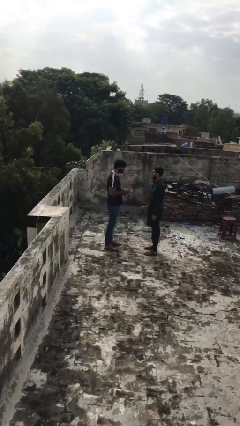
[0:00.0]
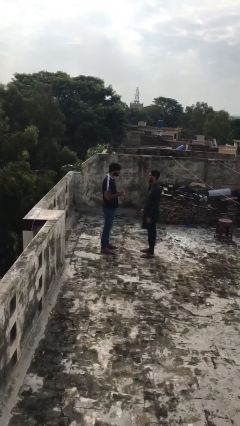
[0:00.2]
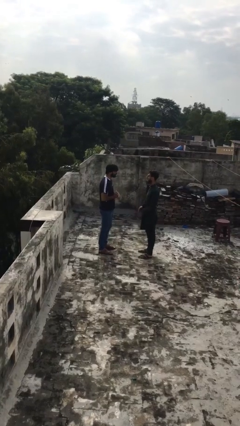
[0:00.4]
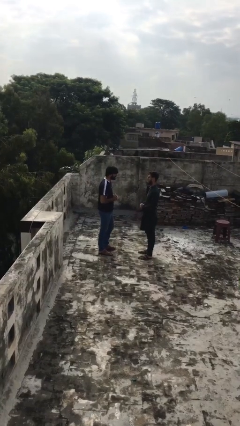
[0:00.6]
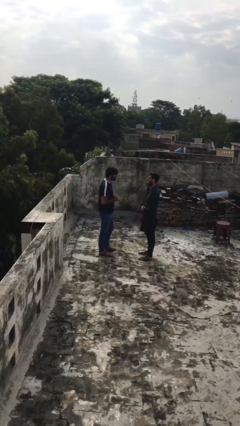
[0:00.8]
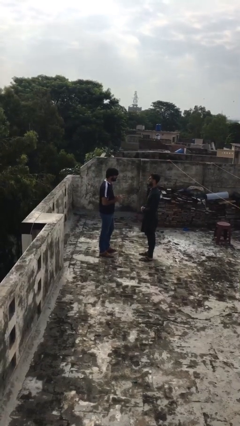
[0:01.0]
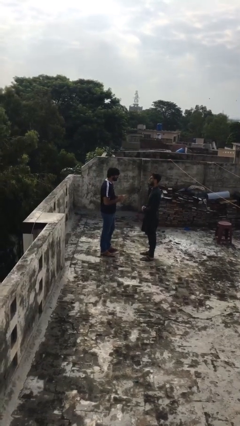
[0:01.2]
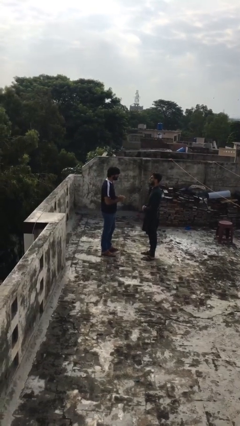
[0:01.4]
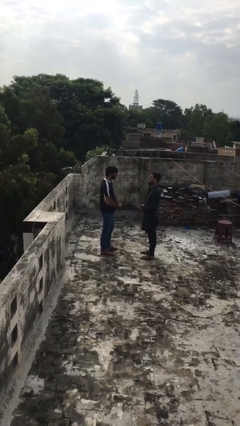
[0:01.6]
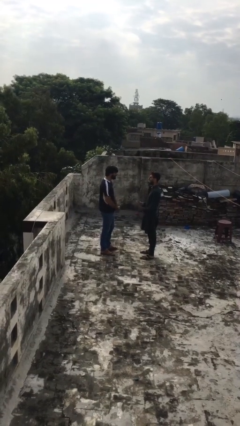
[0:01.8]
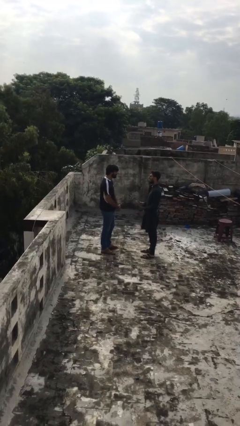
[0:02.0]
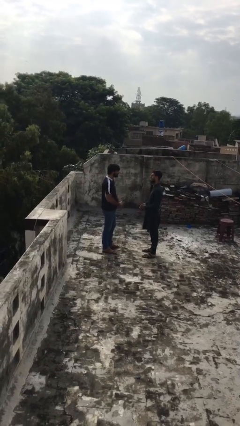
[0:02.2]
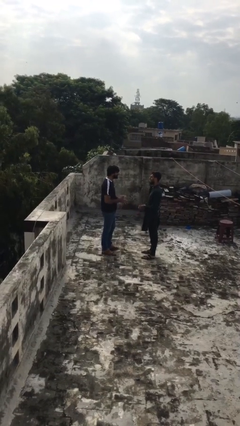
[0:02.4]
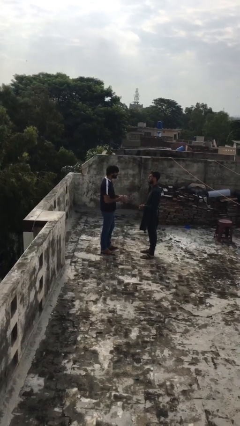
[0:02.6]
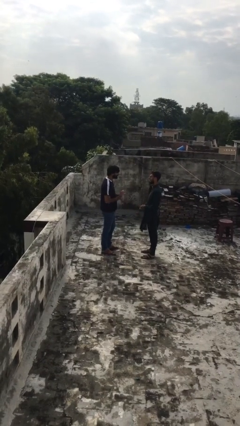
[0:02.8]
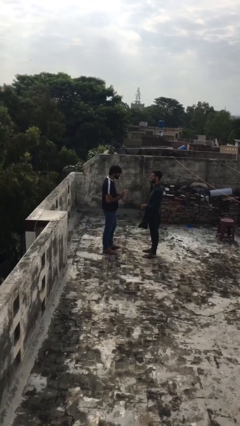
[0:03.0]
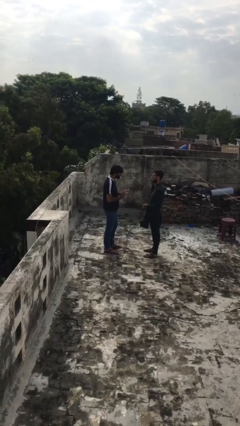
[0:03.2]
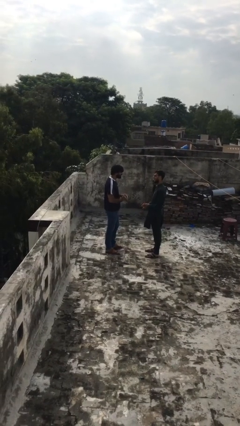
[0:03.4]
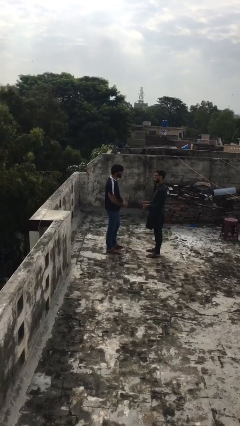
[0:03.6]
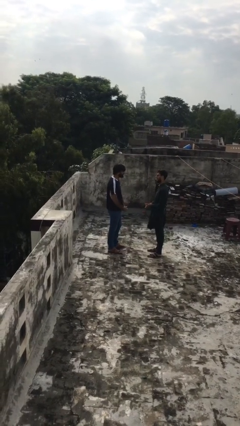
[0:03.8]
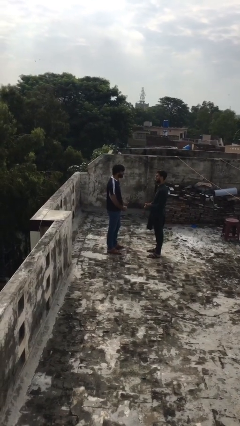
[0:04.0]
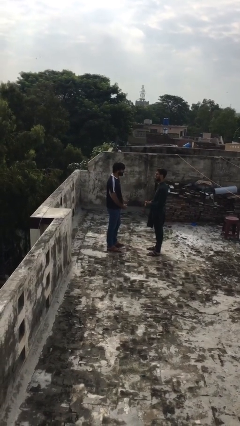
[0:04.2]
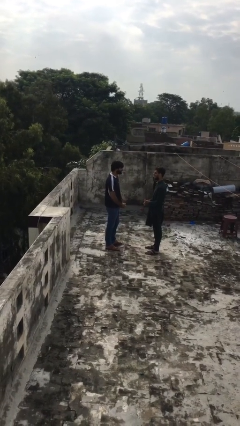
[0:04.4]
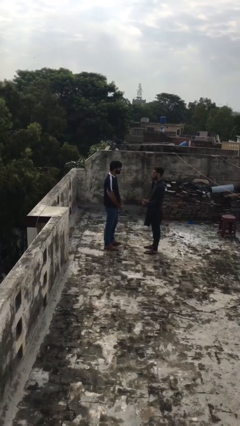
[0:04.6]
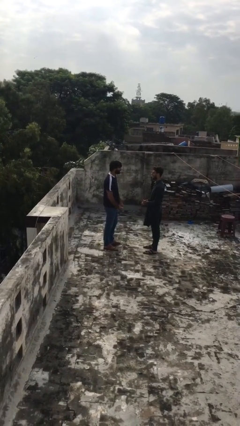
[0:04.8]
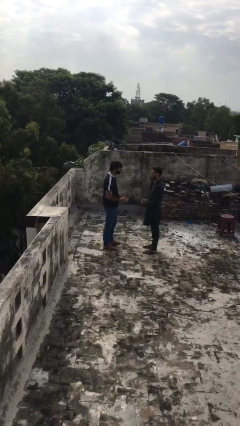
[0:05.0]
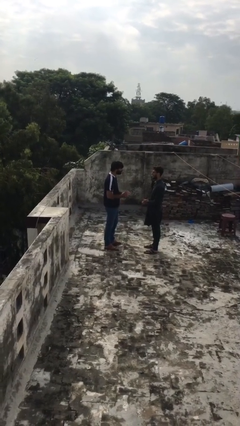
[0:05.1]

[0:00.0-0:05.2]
person talks to person

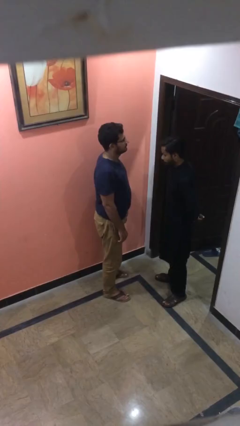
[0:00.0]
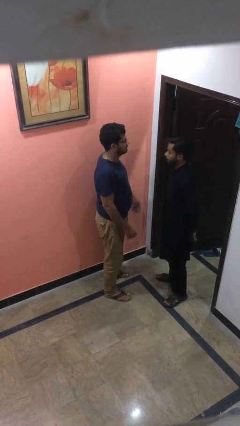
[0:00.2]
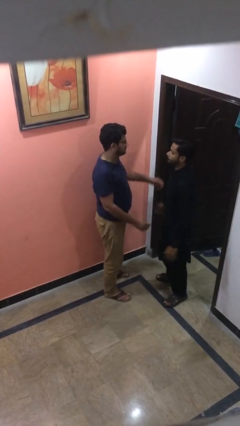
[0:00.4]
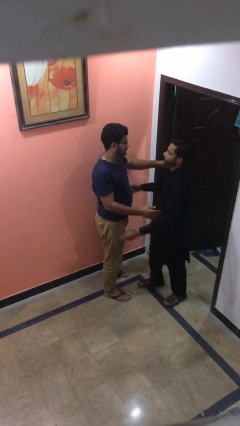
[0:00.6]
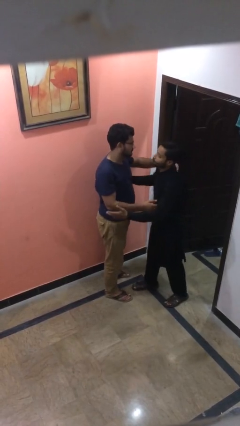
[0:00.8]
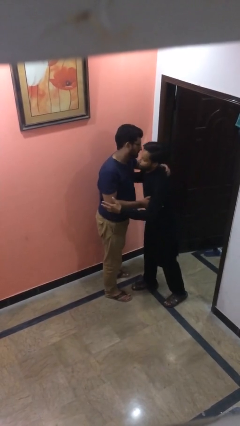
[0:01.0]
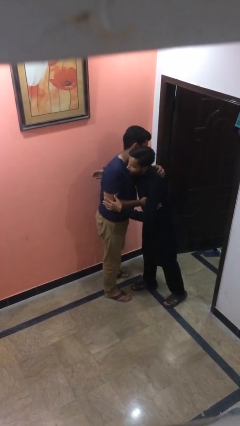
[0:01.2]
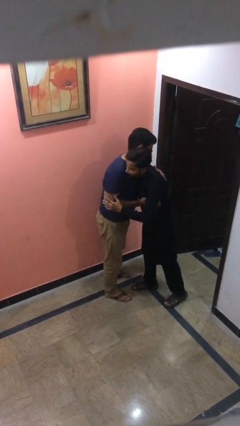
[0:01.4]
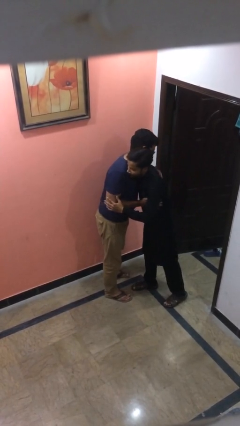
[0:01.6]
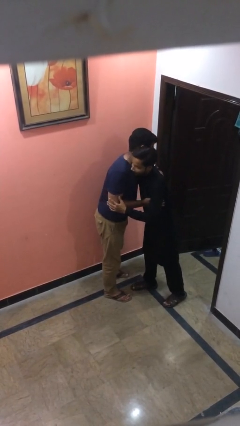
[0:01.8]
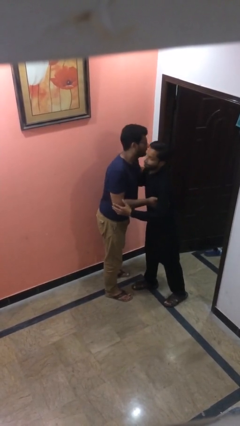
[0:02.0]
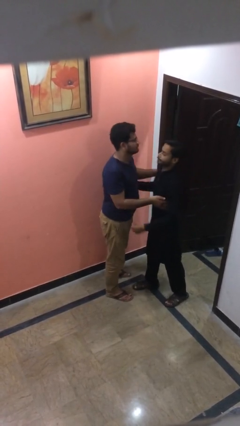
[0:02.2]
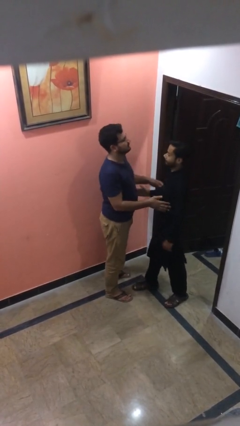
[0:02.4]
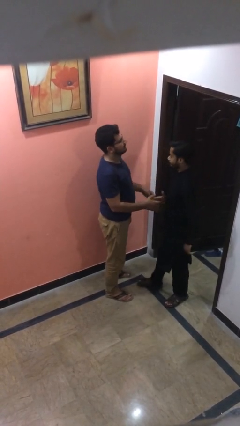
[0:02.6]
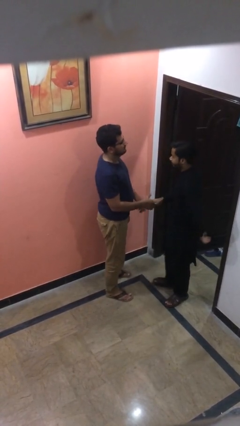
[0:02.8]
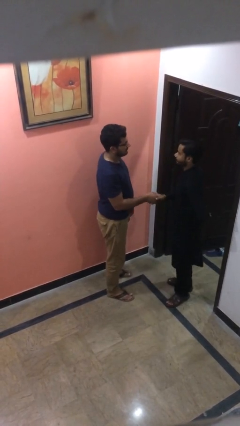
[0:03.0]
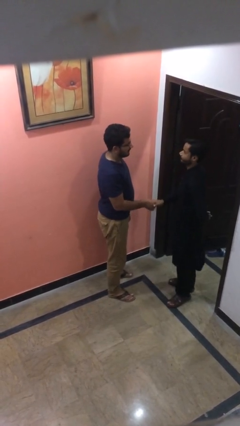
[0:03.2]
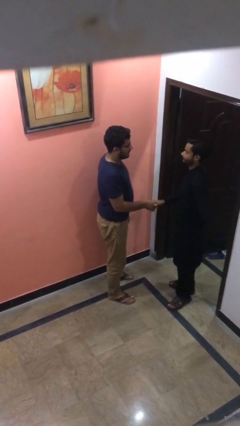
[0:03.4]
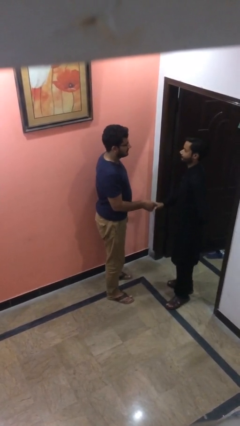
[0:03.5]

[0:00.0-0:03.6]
person embraces person

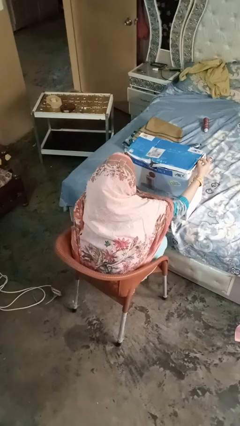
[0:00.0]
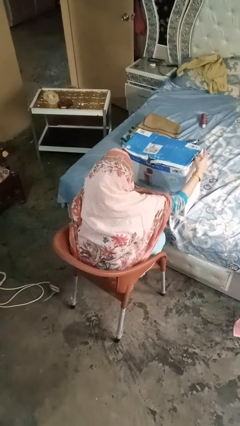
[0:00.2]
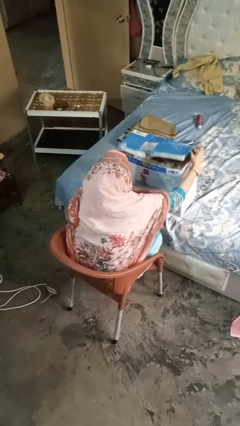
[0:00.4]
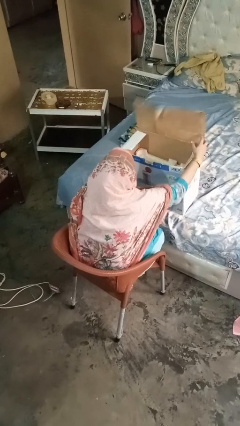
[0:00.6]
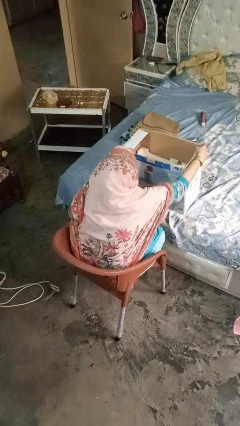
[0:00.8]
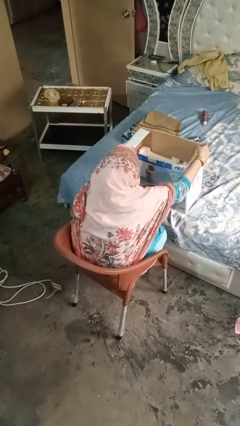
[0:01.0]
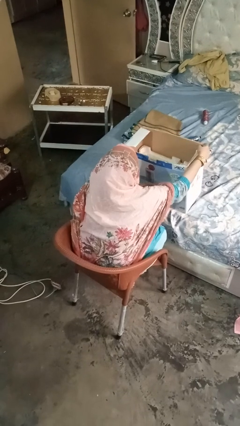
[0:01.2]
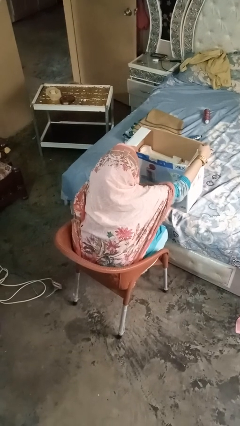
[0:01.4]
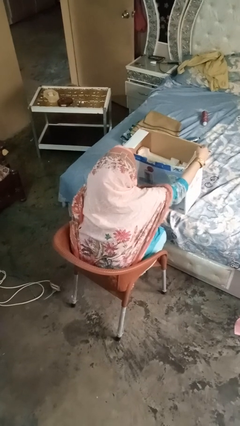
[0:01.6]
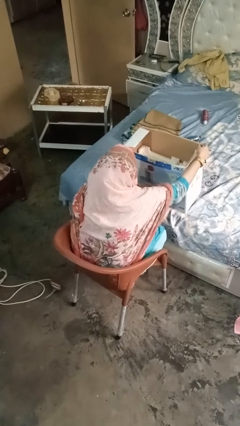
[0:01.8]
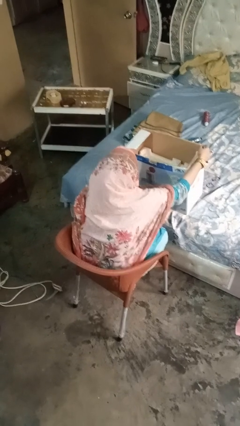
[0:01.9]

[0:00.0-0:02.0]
person opens box

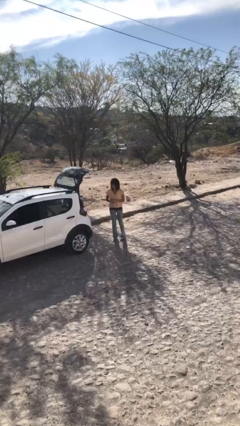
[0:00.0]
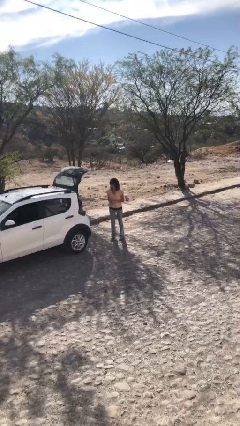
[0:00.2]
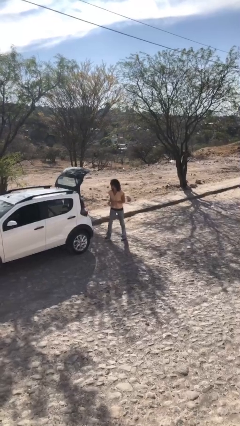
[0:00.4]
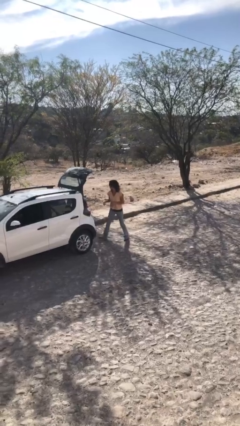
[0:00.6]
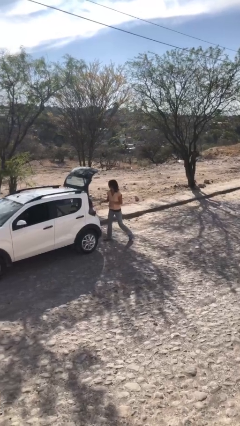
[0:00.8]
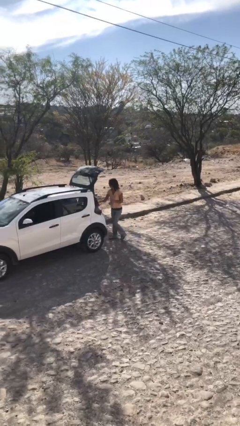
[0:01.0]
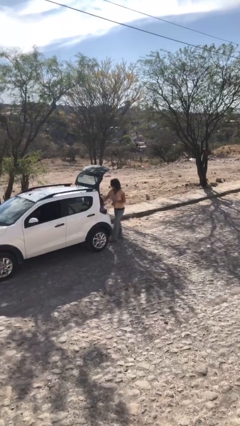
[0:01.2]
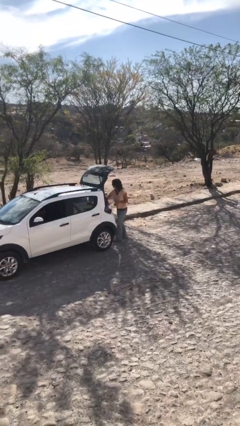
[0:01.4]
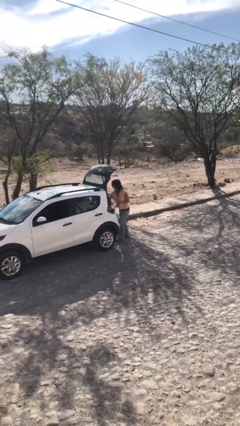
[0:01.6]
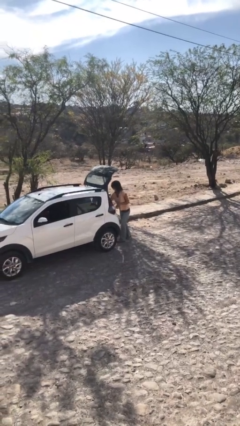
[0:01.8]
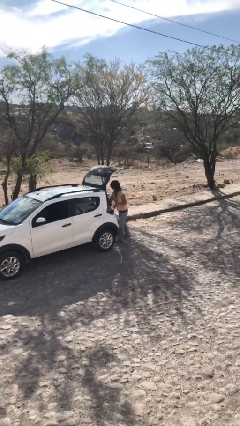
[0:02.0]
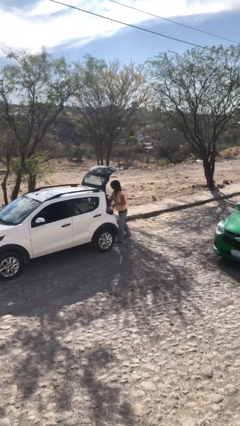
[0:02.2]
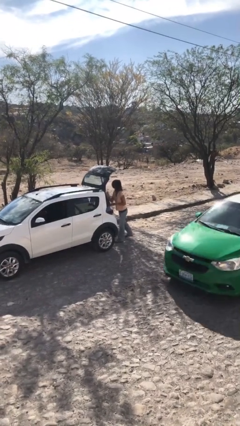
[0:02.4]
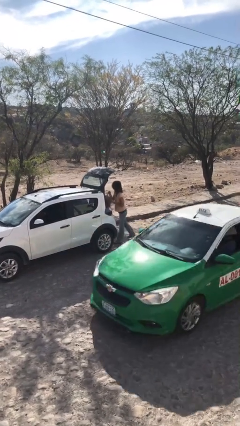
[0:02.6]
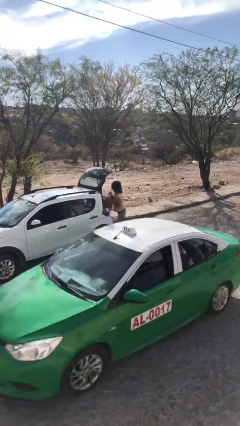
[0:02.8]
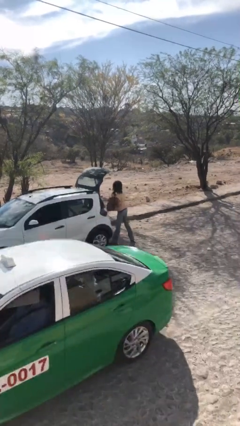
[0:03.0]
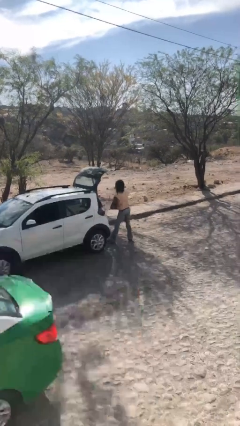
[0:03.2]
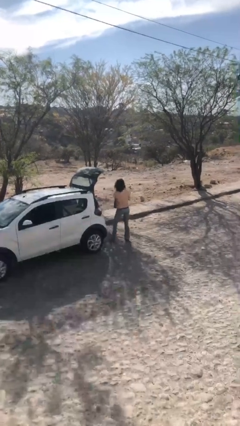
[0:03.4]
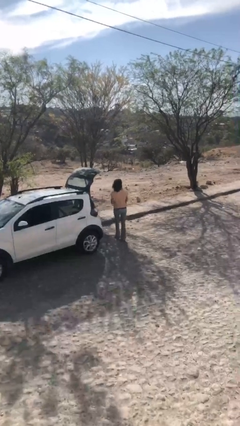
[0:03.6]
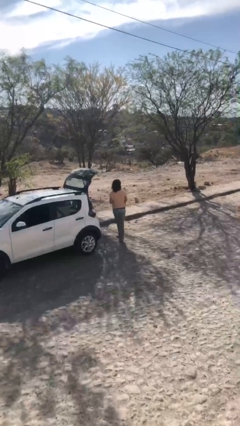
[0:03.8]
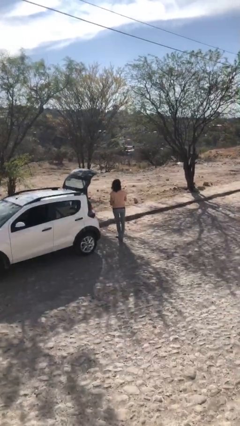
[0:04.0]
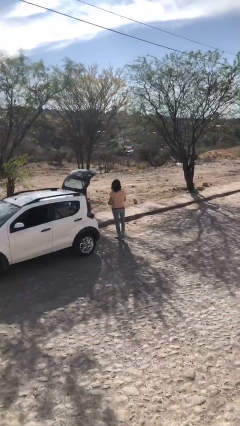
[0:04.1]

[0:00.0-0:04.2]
person unloads car

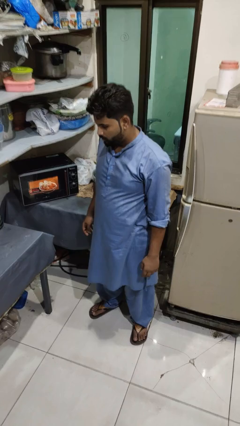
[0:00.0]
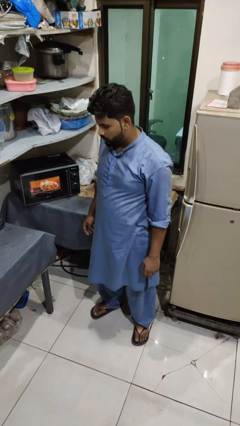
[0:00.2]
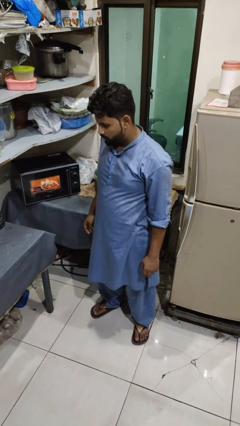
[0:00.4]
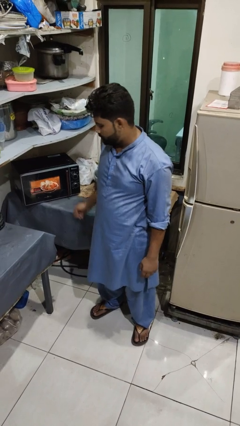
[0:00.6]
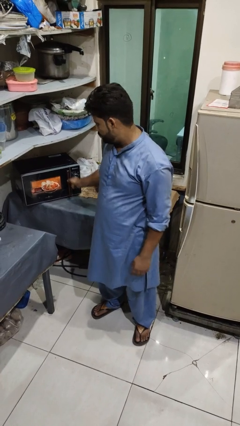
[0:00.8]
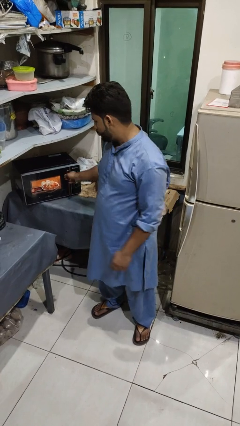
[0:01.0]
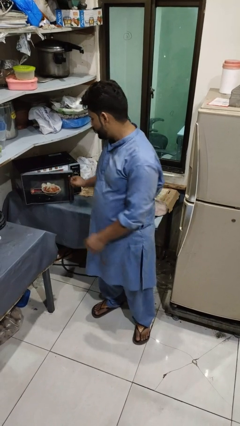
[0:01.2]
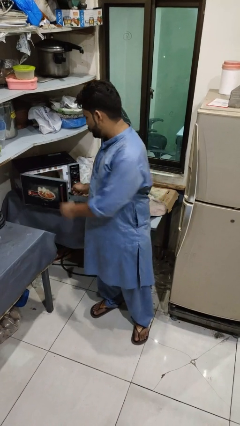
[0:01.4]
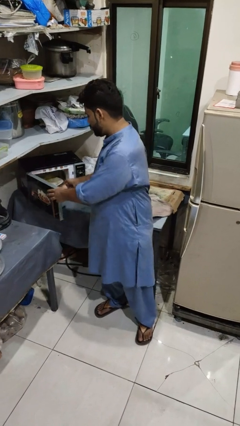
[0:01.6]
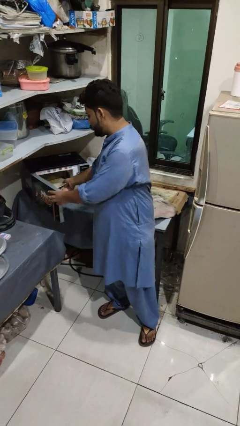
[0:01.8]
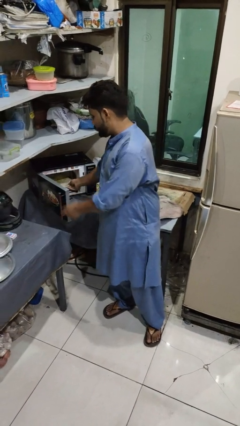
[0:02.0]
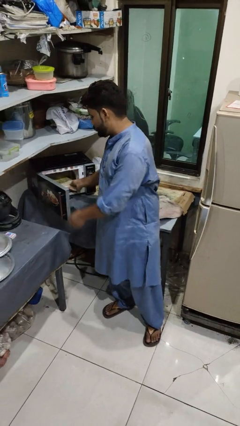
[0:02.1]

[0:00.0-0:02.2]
person takes object from microwave

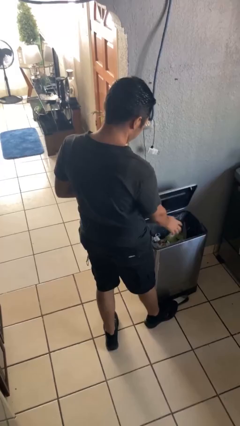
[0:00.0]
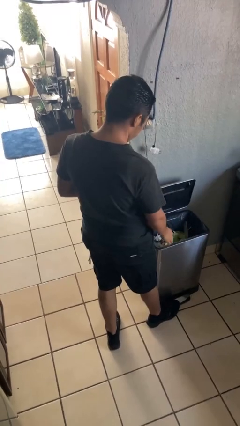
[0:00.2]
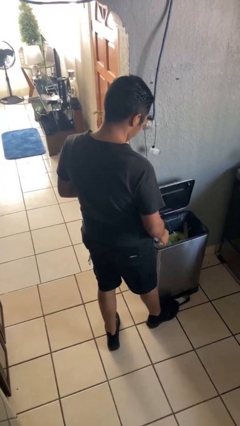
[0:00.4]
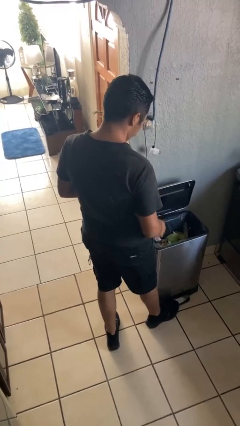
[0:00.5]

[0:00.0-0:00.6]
person discards trash
